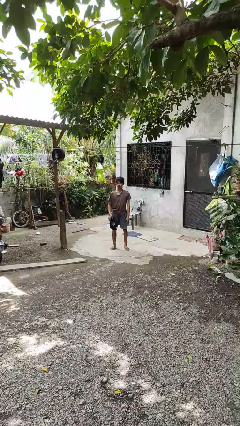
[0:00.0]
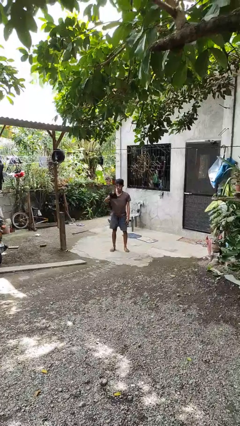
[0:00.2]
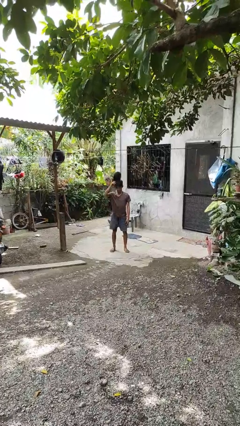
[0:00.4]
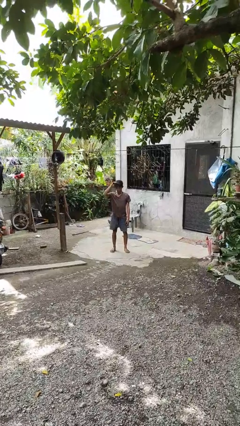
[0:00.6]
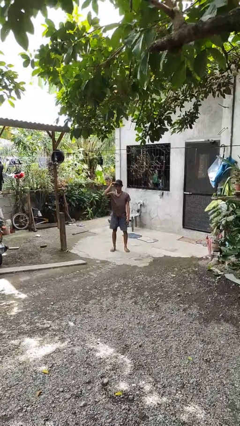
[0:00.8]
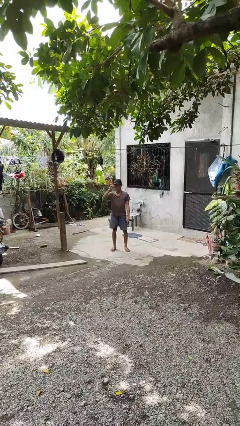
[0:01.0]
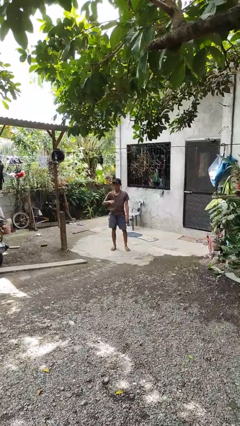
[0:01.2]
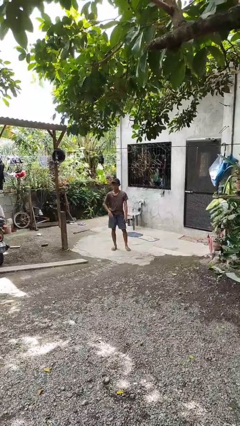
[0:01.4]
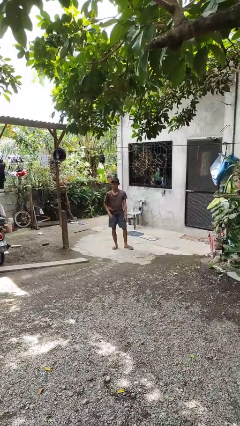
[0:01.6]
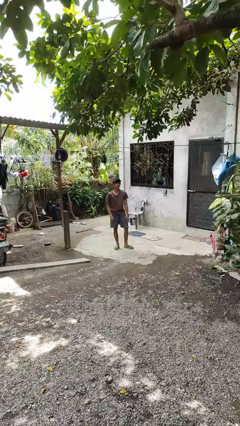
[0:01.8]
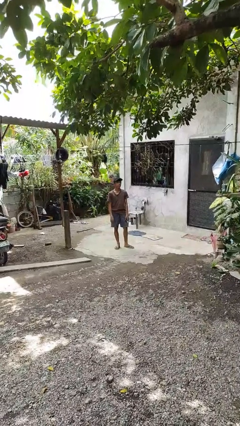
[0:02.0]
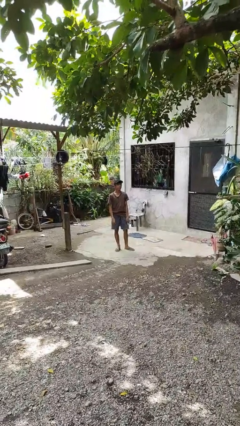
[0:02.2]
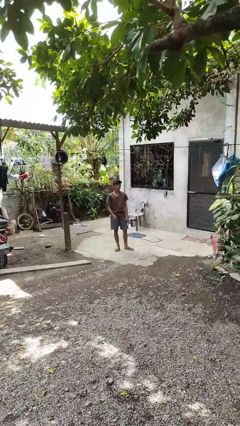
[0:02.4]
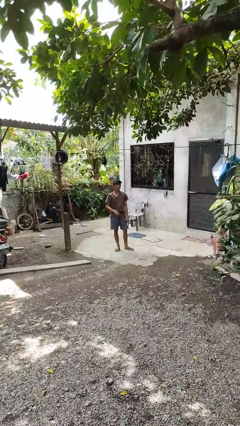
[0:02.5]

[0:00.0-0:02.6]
person puts on hat

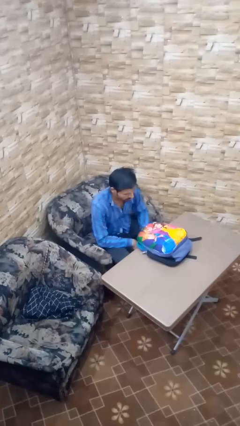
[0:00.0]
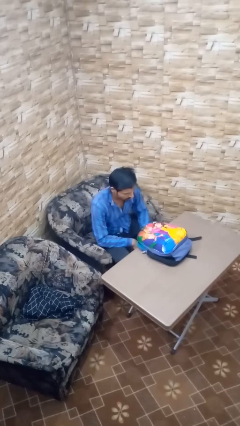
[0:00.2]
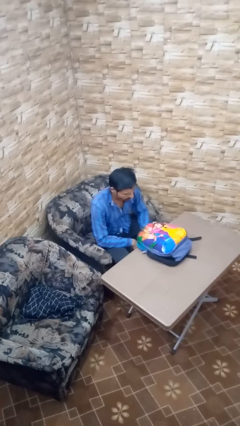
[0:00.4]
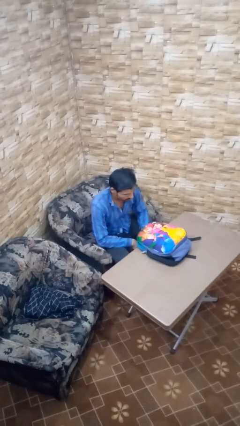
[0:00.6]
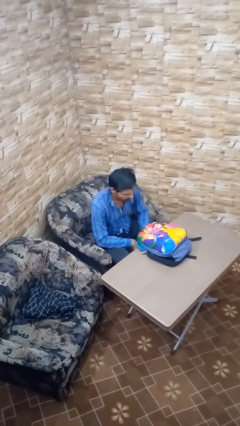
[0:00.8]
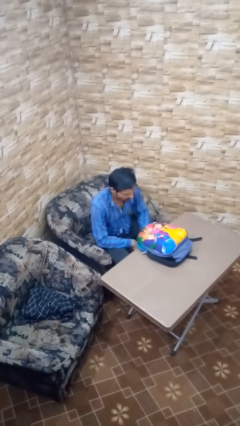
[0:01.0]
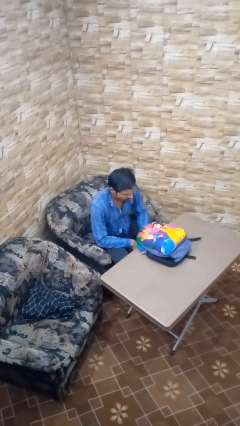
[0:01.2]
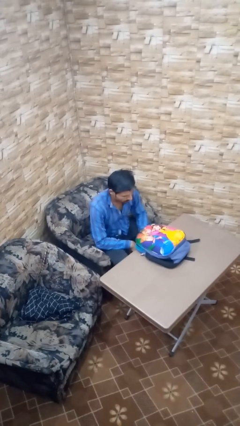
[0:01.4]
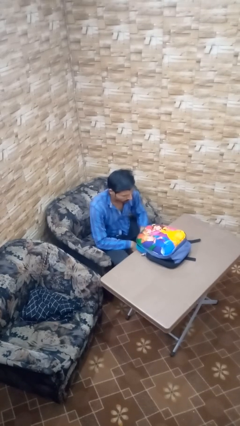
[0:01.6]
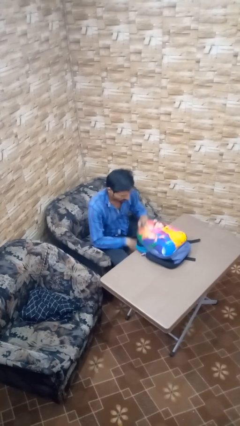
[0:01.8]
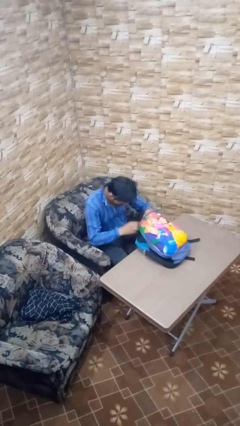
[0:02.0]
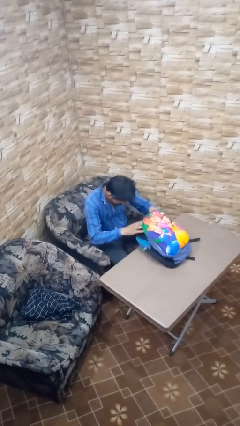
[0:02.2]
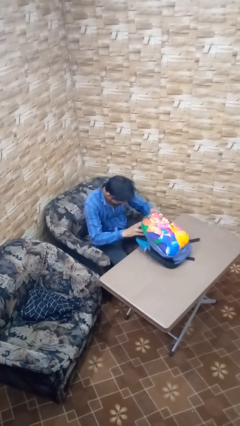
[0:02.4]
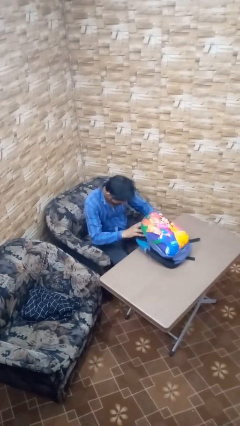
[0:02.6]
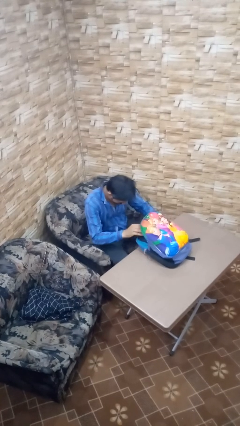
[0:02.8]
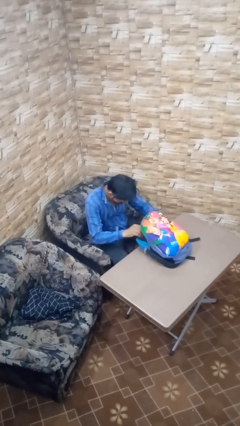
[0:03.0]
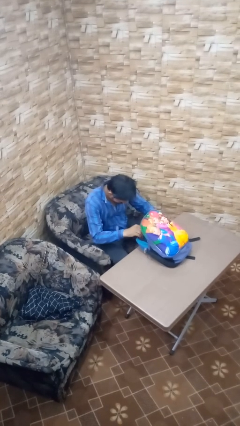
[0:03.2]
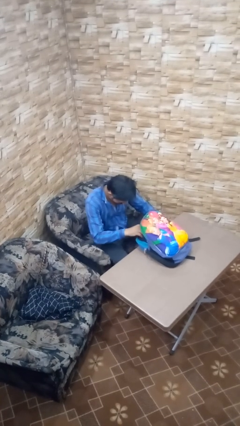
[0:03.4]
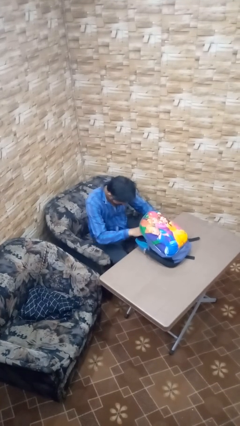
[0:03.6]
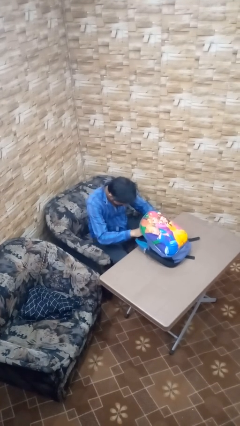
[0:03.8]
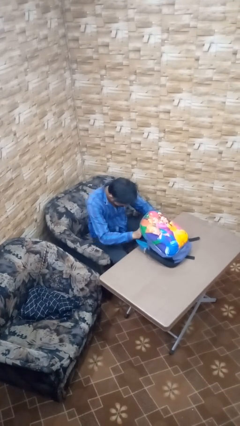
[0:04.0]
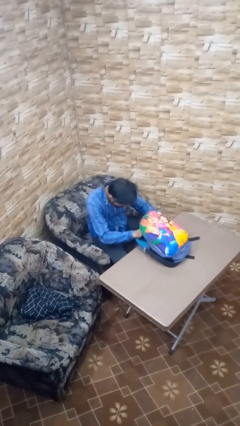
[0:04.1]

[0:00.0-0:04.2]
person searches in backpack

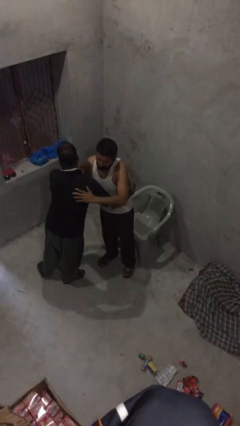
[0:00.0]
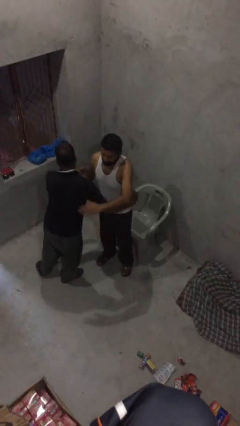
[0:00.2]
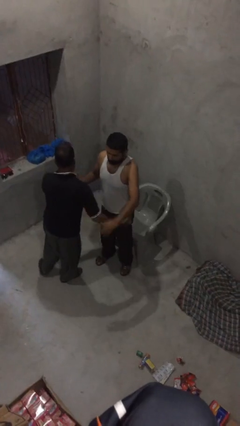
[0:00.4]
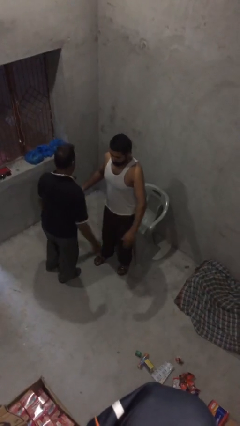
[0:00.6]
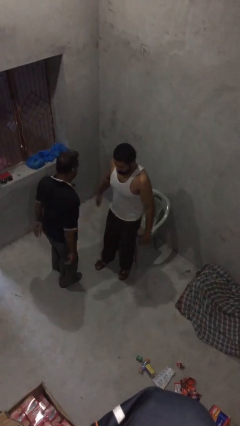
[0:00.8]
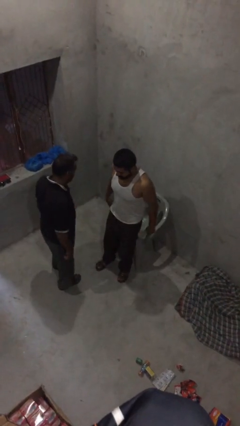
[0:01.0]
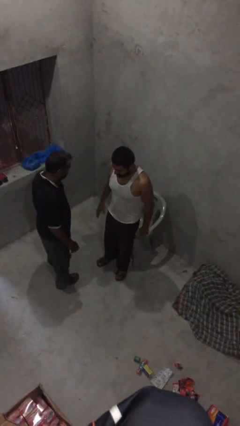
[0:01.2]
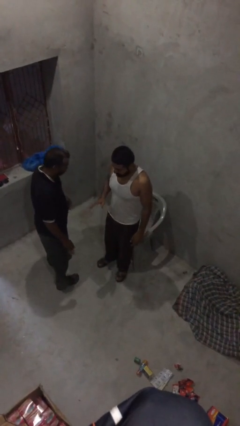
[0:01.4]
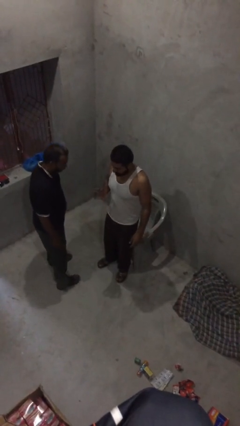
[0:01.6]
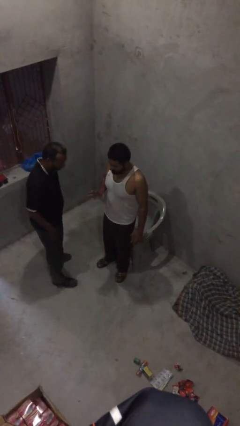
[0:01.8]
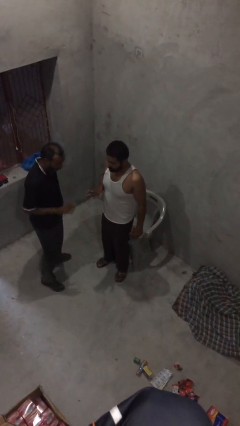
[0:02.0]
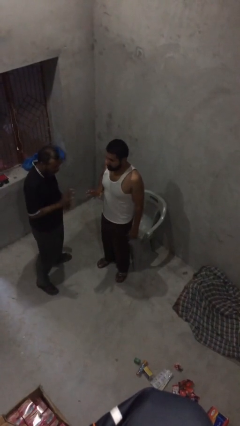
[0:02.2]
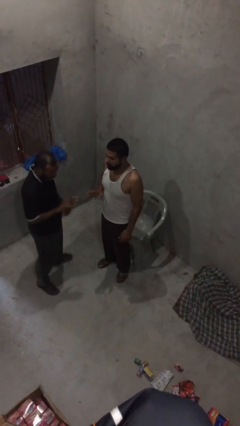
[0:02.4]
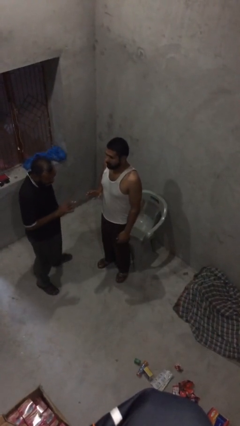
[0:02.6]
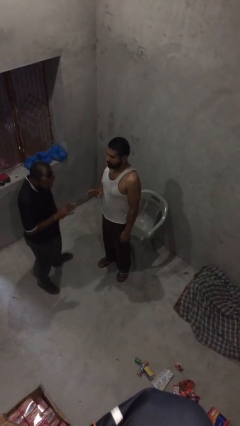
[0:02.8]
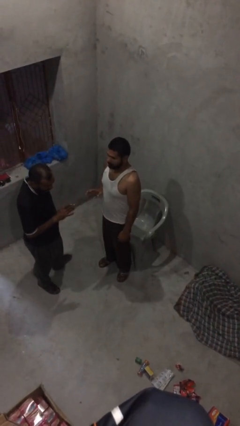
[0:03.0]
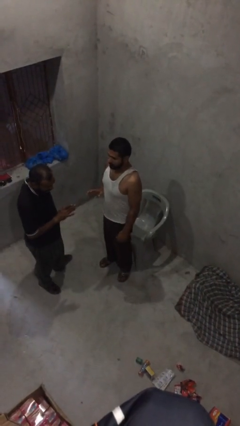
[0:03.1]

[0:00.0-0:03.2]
person talks to person

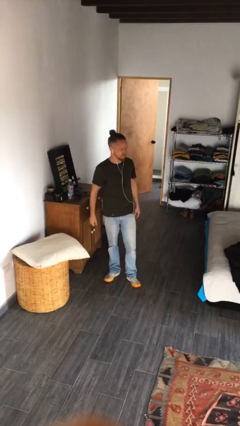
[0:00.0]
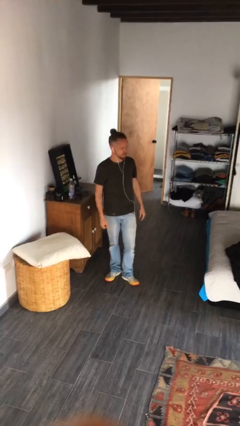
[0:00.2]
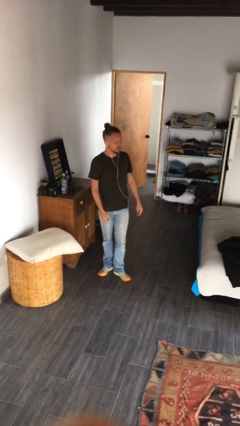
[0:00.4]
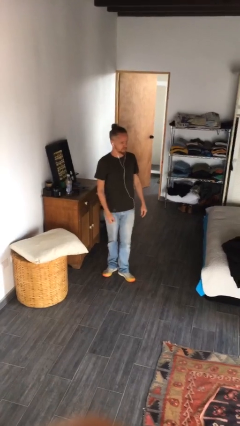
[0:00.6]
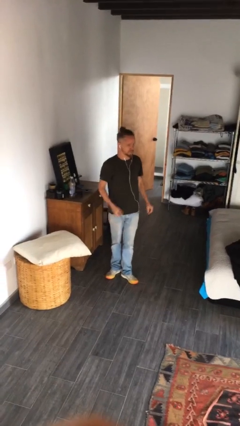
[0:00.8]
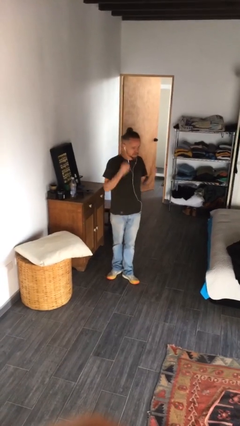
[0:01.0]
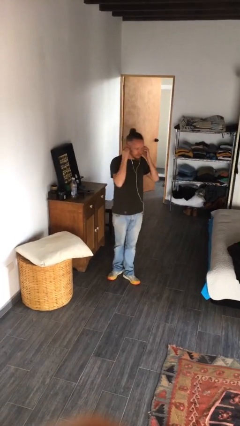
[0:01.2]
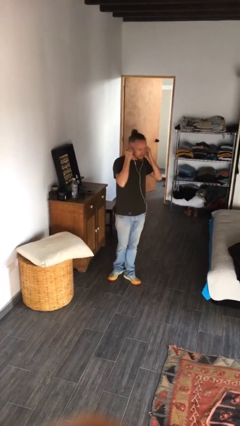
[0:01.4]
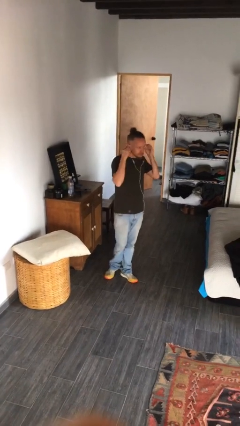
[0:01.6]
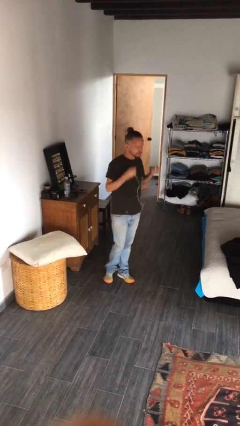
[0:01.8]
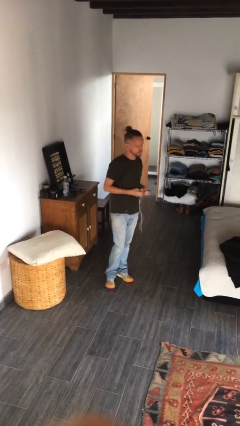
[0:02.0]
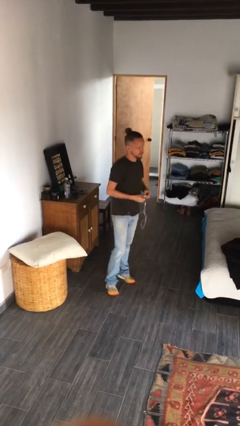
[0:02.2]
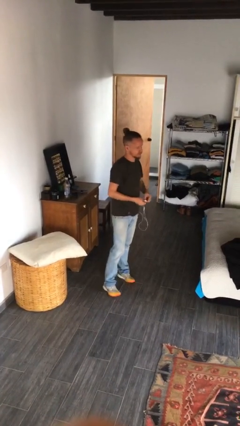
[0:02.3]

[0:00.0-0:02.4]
person takes off headphones

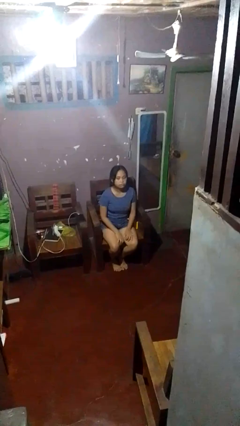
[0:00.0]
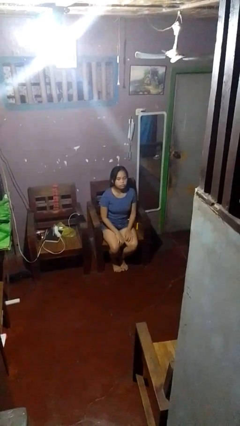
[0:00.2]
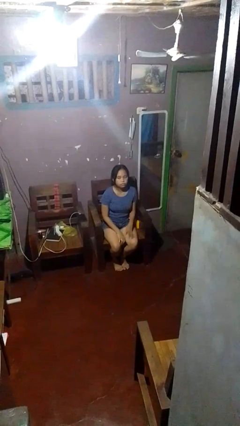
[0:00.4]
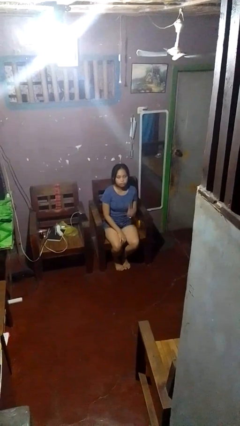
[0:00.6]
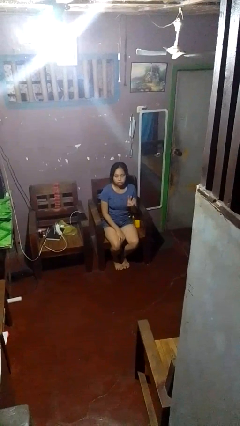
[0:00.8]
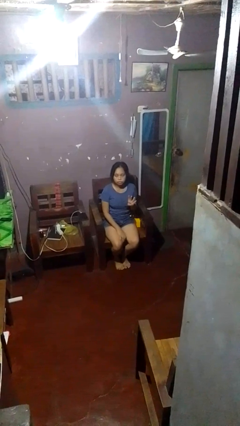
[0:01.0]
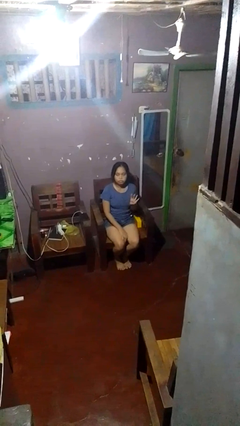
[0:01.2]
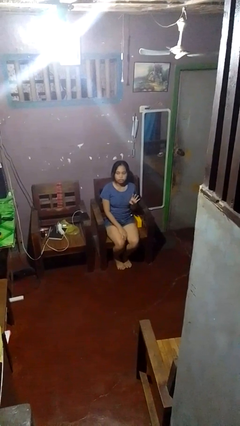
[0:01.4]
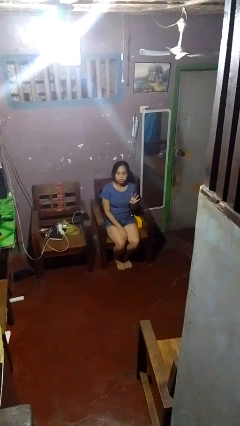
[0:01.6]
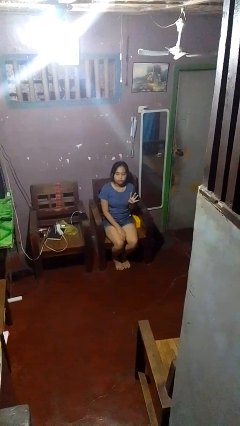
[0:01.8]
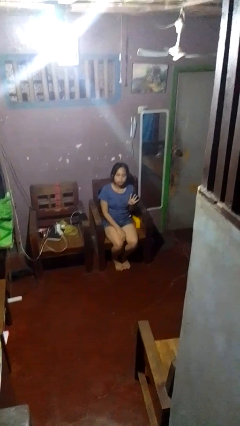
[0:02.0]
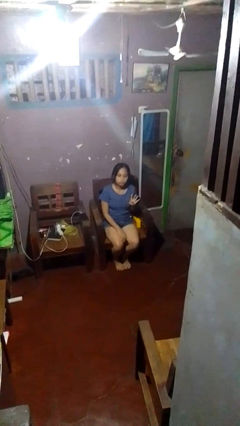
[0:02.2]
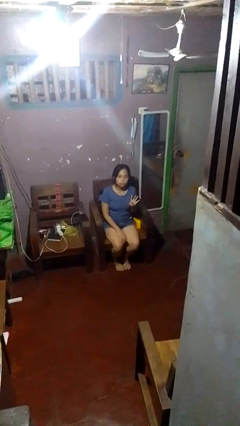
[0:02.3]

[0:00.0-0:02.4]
person gestures number four

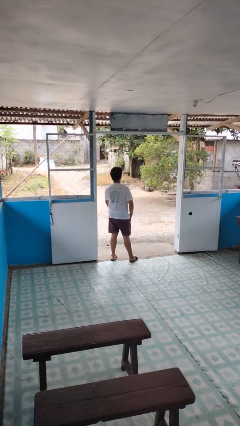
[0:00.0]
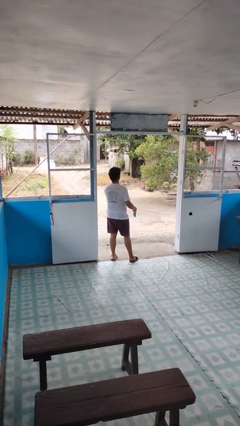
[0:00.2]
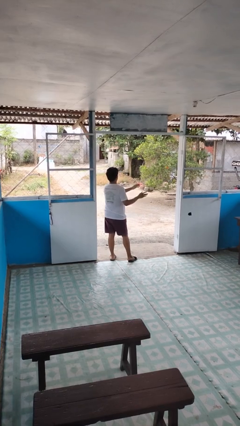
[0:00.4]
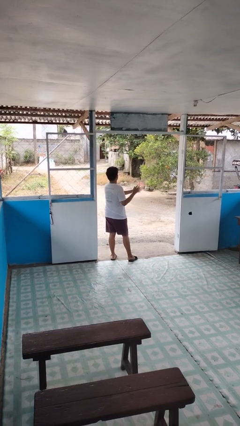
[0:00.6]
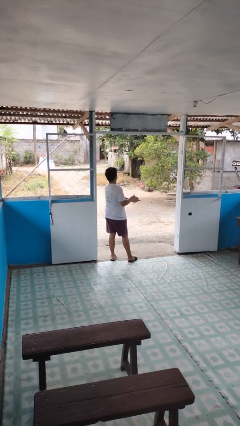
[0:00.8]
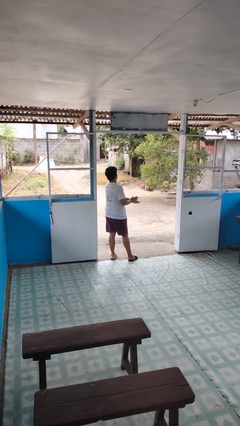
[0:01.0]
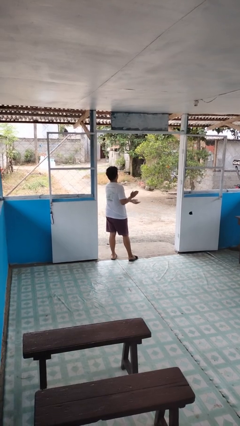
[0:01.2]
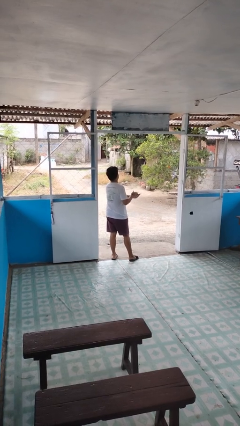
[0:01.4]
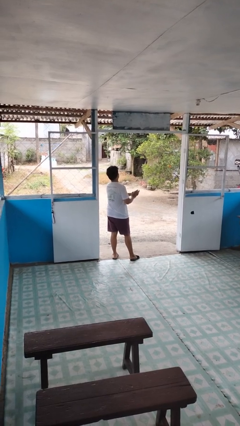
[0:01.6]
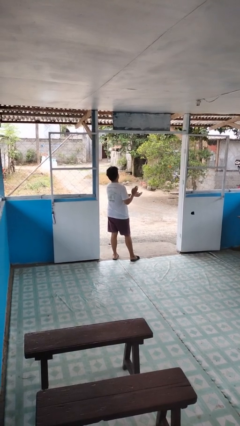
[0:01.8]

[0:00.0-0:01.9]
person claps hands

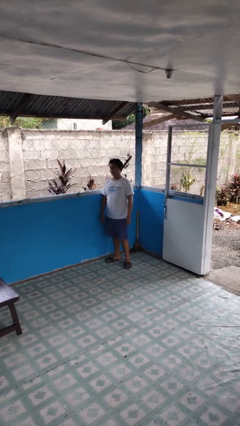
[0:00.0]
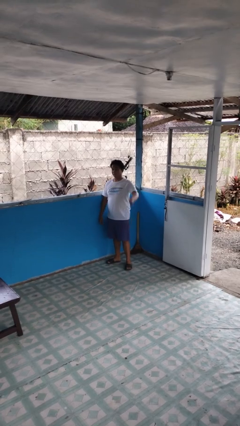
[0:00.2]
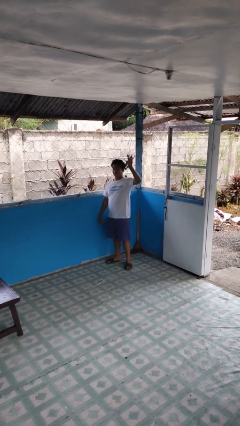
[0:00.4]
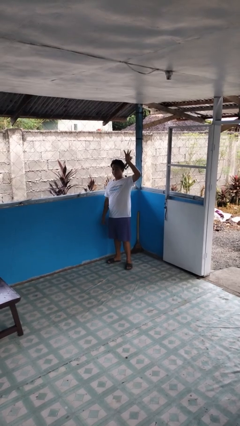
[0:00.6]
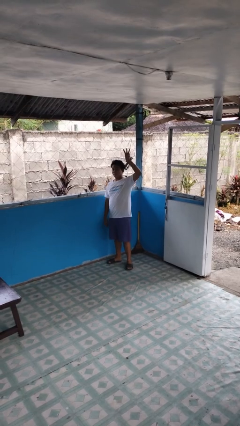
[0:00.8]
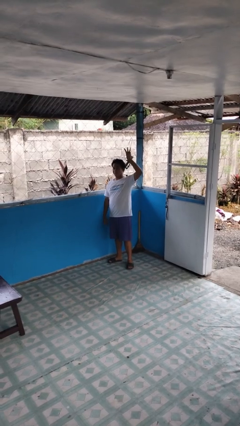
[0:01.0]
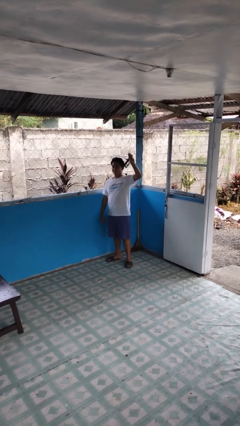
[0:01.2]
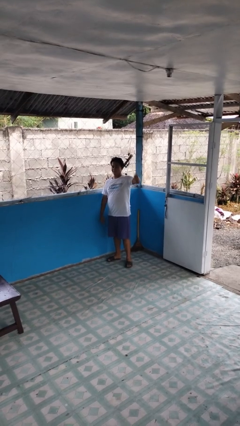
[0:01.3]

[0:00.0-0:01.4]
person gestures number three
